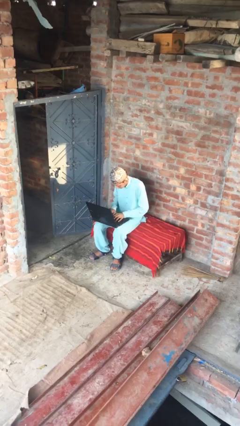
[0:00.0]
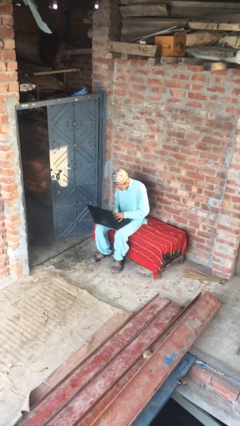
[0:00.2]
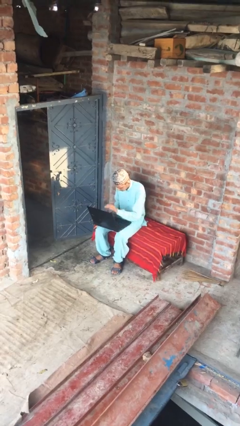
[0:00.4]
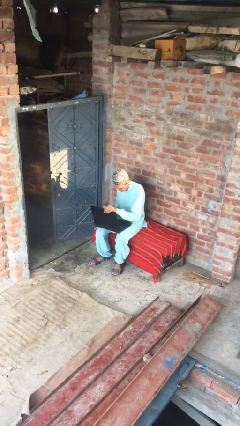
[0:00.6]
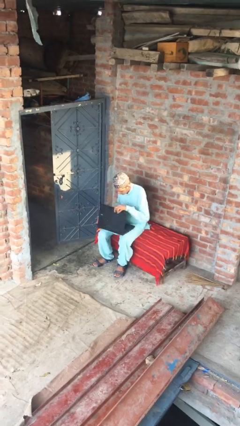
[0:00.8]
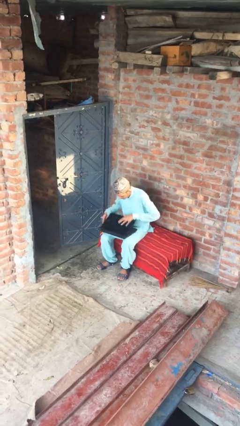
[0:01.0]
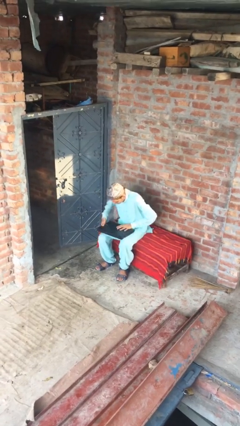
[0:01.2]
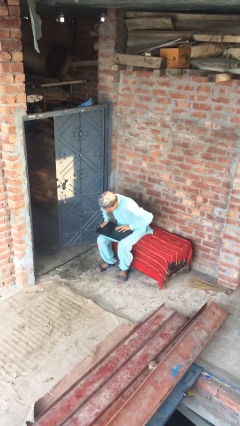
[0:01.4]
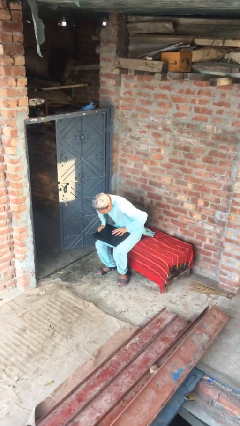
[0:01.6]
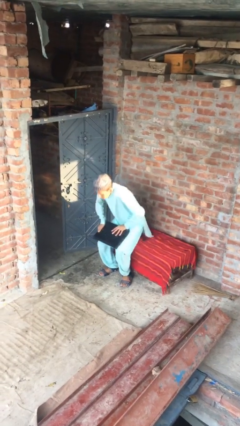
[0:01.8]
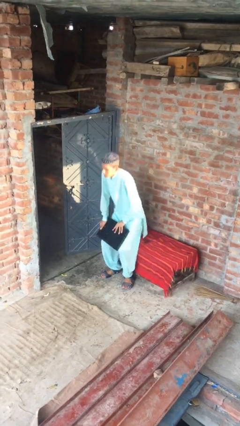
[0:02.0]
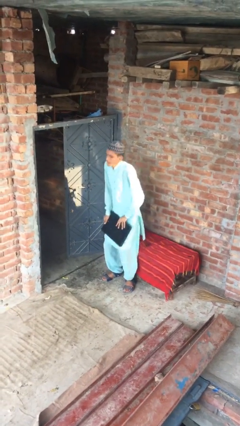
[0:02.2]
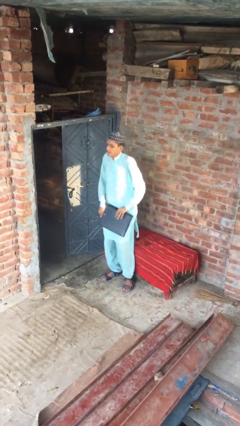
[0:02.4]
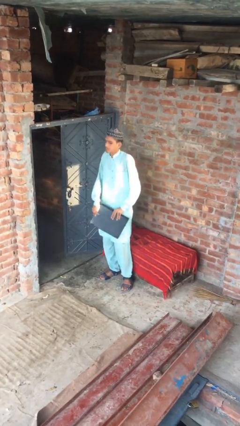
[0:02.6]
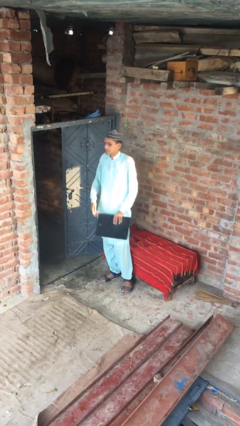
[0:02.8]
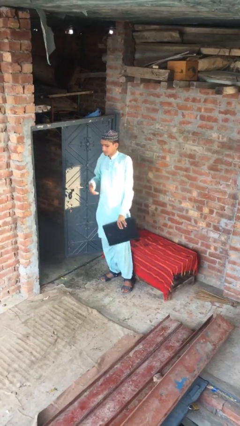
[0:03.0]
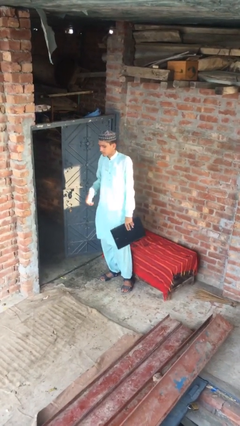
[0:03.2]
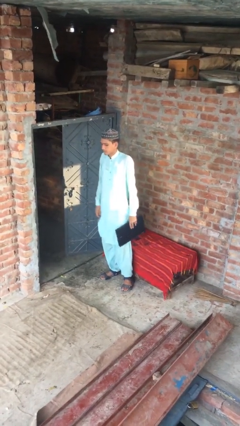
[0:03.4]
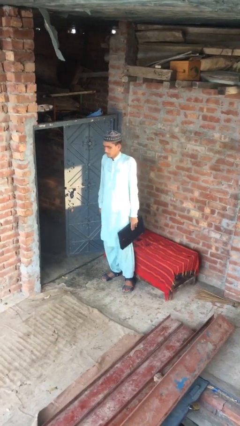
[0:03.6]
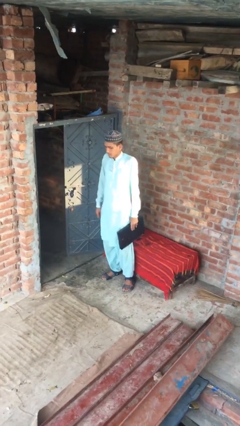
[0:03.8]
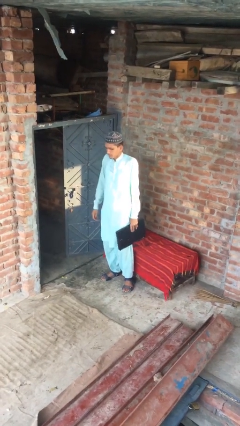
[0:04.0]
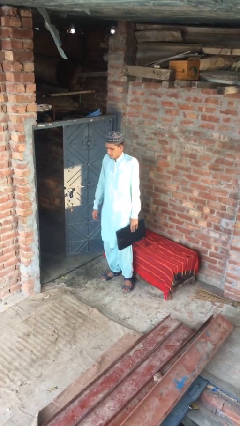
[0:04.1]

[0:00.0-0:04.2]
person stands up

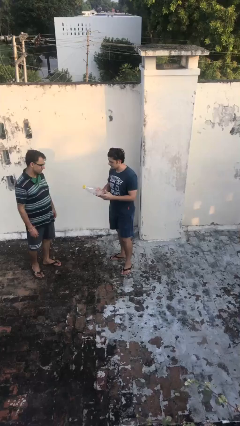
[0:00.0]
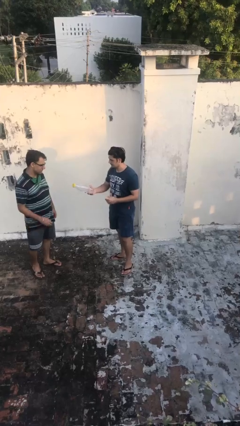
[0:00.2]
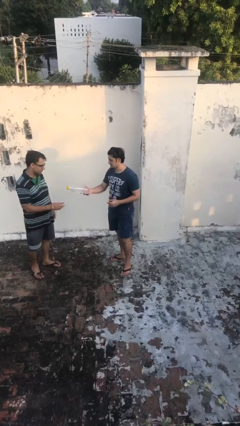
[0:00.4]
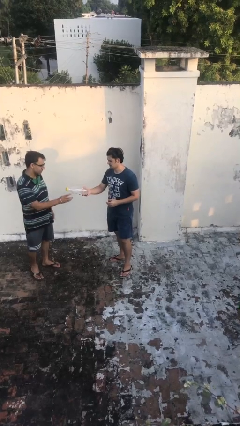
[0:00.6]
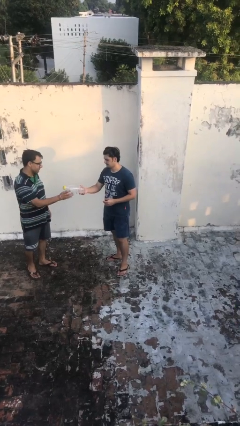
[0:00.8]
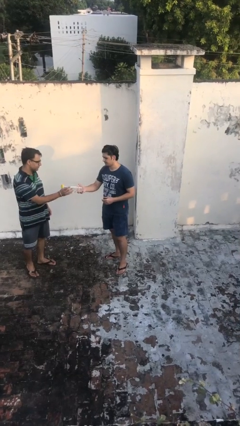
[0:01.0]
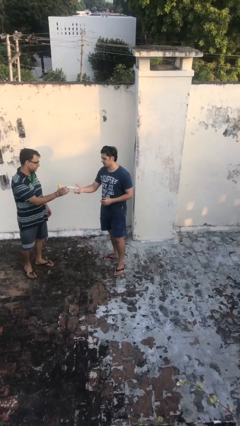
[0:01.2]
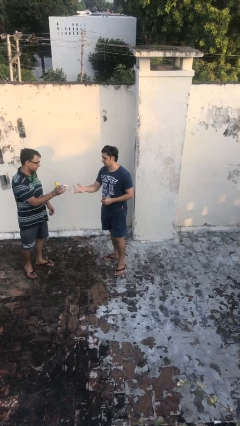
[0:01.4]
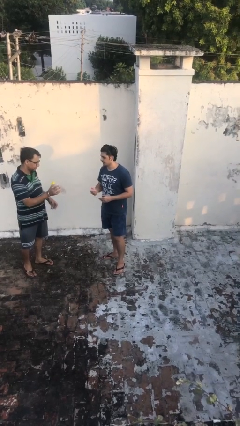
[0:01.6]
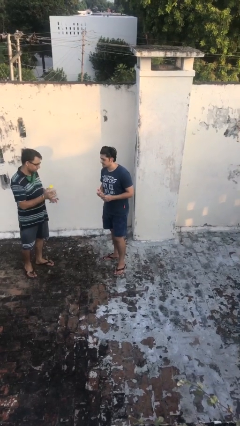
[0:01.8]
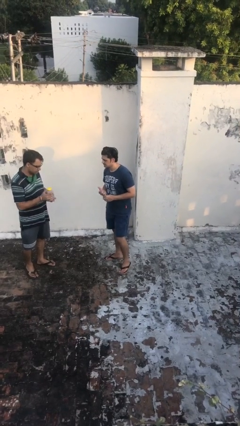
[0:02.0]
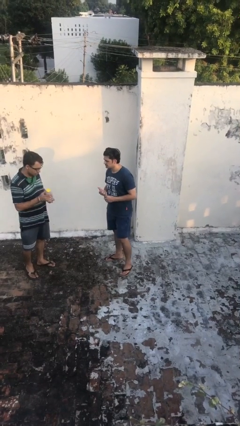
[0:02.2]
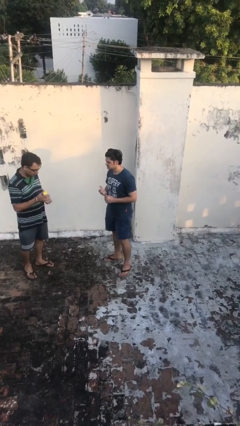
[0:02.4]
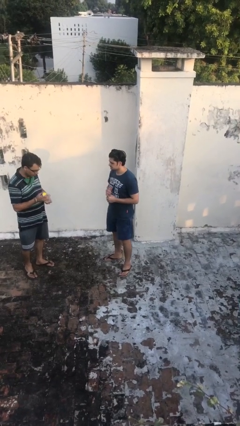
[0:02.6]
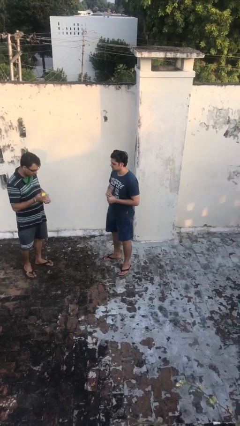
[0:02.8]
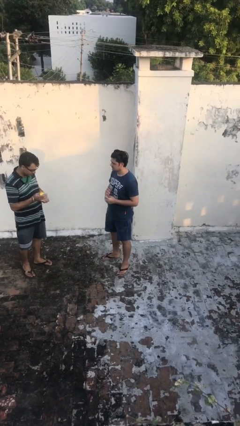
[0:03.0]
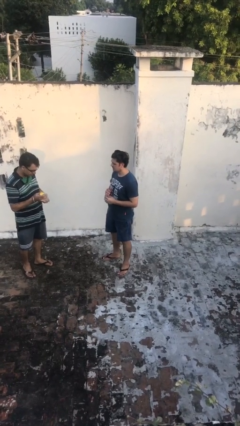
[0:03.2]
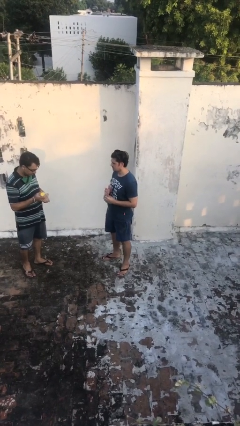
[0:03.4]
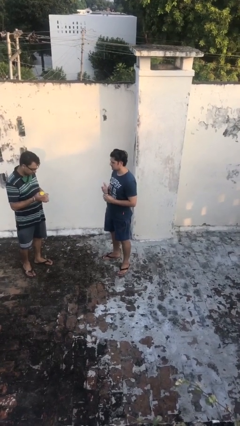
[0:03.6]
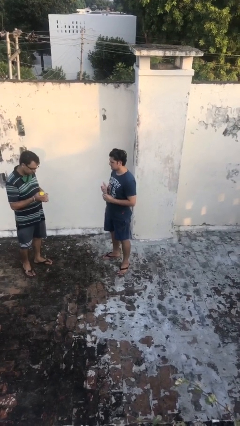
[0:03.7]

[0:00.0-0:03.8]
person transfers object to person

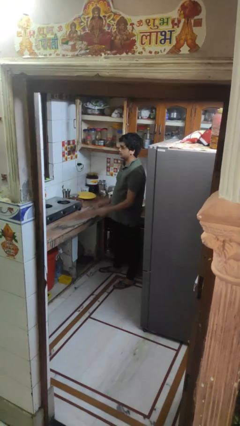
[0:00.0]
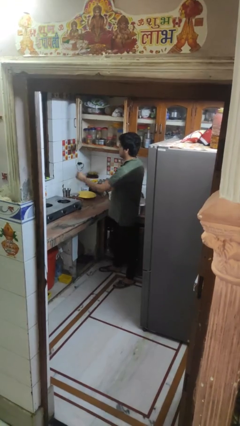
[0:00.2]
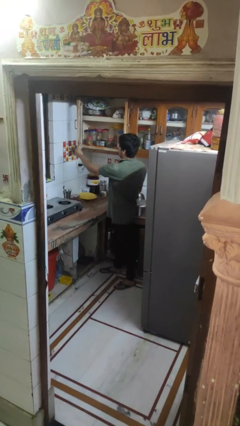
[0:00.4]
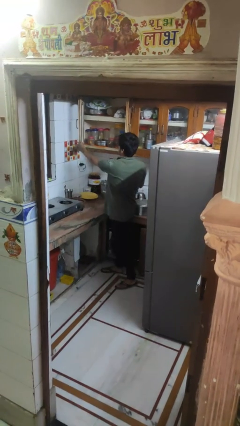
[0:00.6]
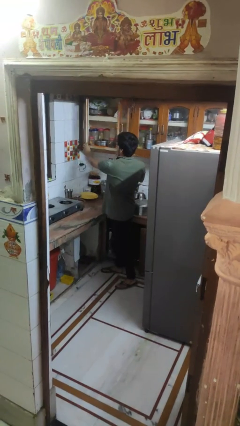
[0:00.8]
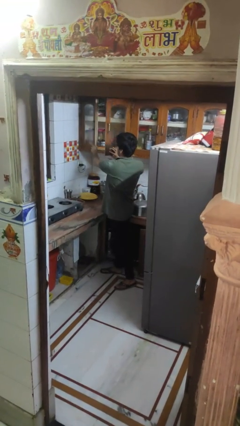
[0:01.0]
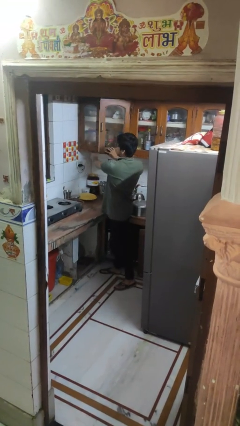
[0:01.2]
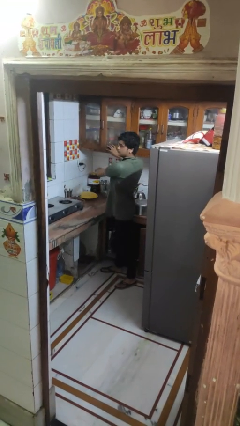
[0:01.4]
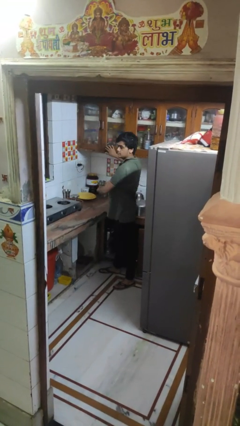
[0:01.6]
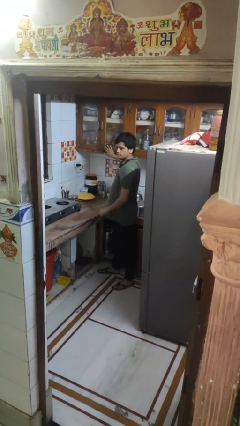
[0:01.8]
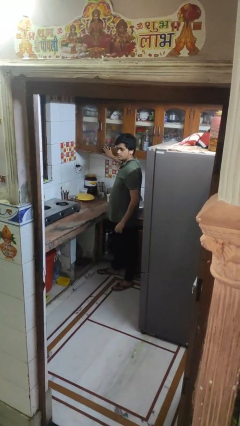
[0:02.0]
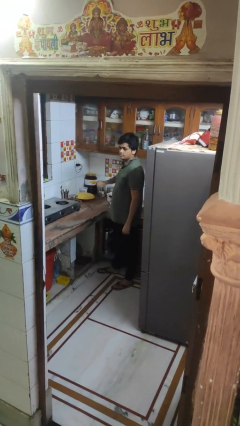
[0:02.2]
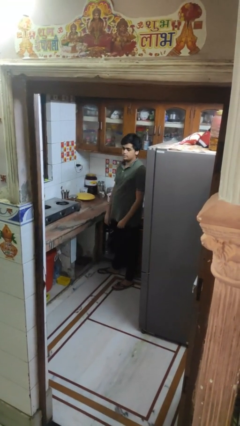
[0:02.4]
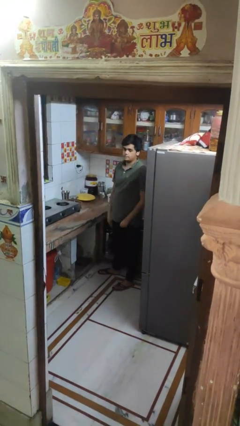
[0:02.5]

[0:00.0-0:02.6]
person closes cabinet

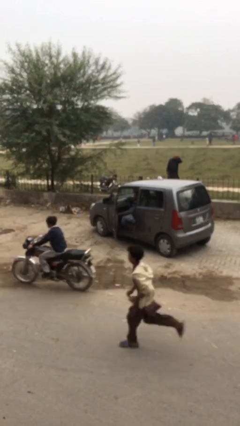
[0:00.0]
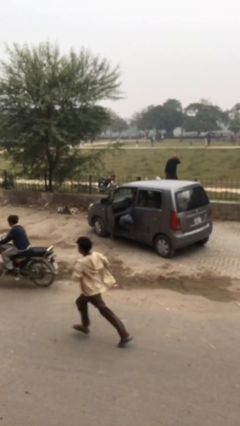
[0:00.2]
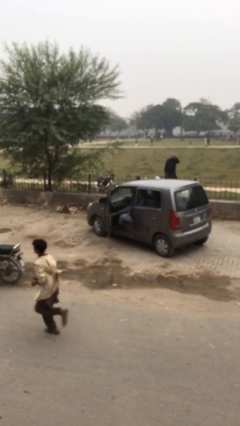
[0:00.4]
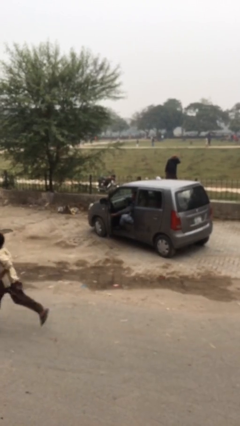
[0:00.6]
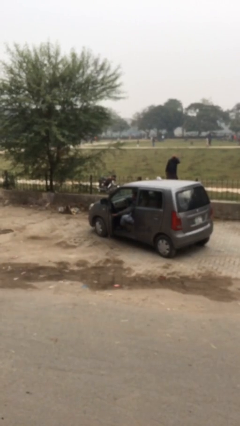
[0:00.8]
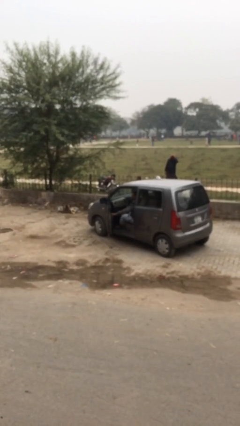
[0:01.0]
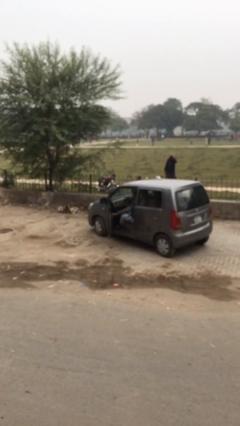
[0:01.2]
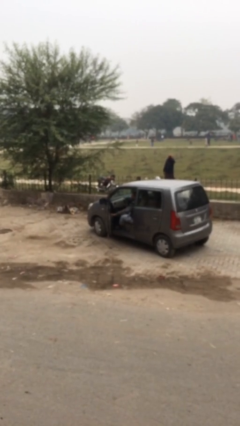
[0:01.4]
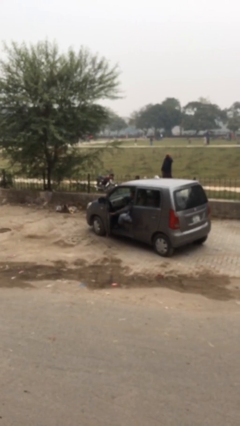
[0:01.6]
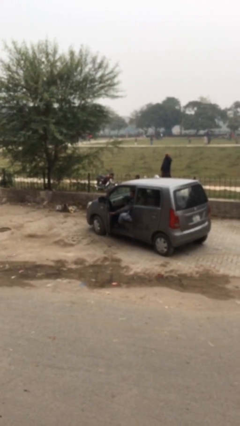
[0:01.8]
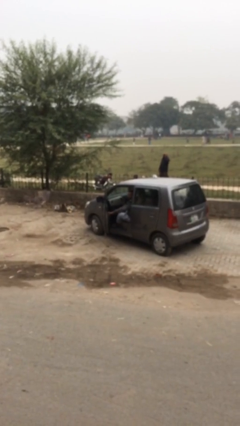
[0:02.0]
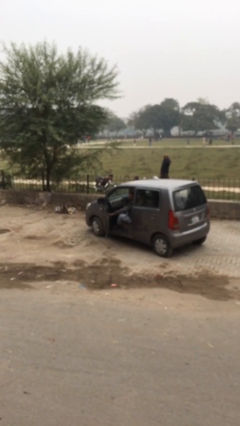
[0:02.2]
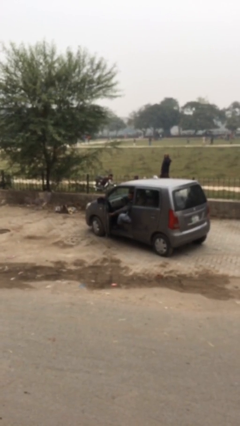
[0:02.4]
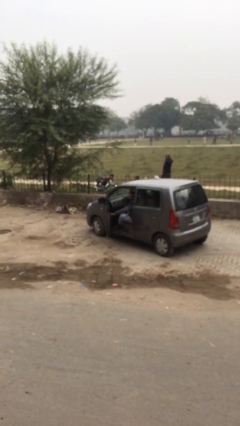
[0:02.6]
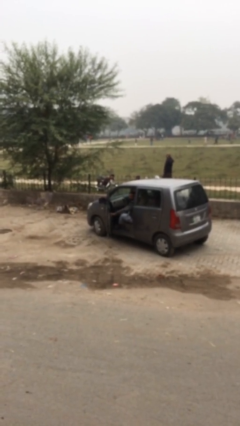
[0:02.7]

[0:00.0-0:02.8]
person opens car door

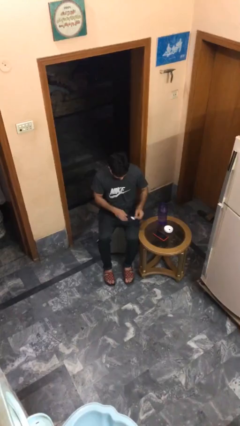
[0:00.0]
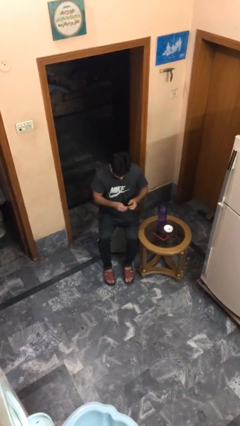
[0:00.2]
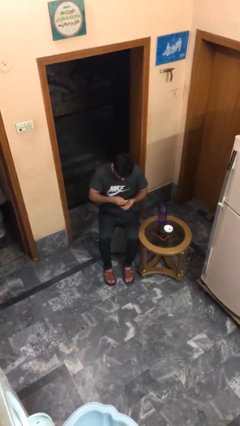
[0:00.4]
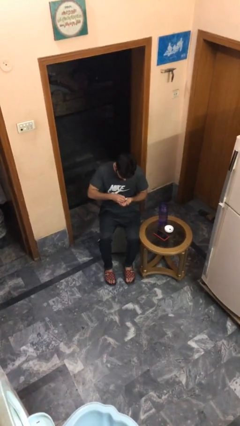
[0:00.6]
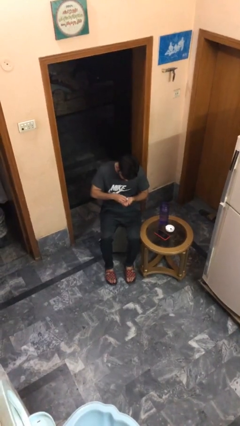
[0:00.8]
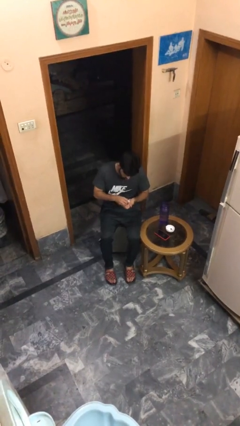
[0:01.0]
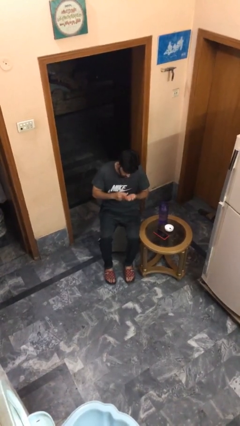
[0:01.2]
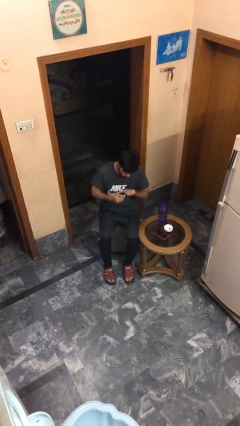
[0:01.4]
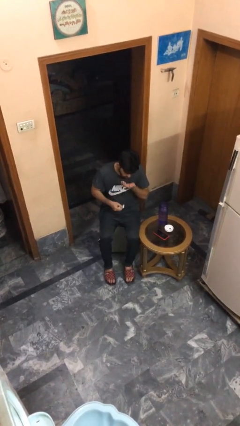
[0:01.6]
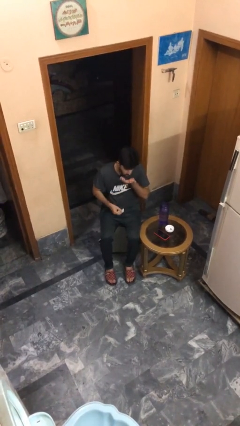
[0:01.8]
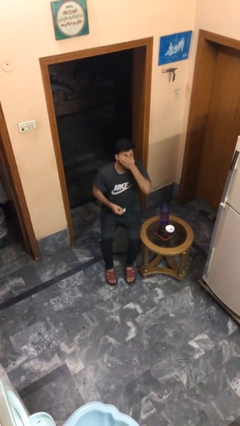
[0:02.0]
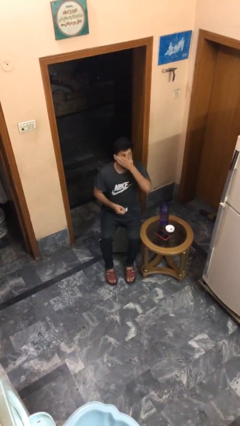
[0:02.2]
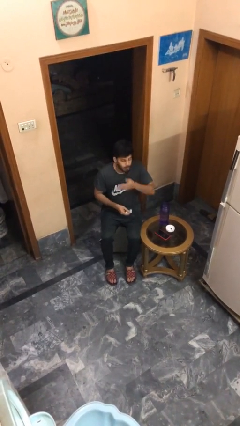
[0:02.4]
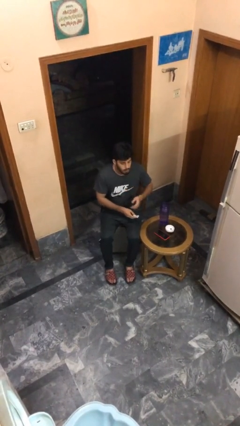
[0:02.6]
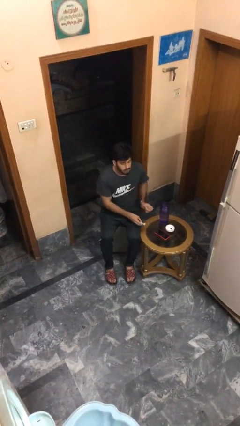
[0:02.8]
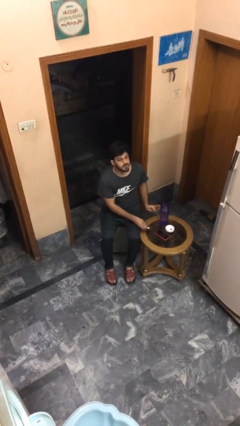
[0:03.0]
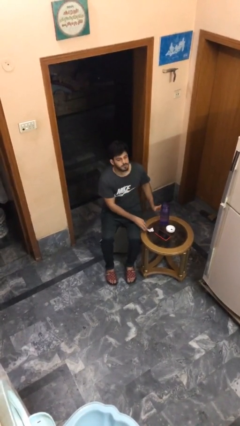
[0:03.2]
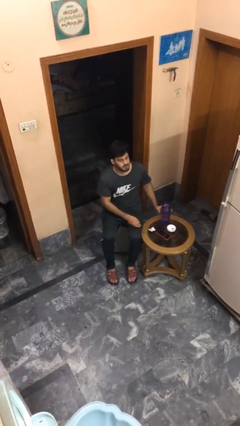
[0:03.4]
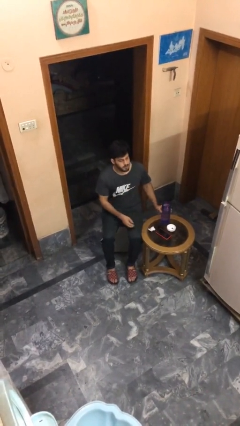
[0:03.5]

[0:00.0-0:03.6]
person takes medicine pills

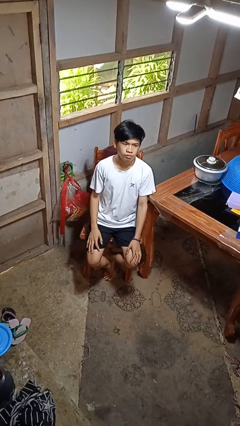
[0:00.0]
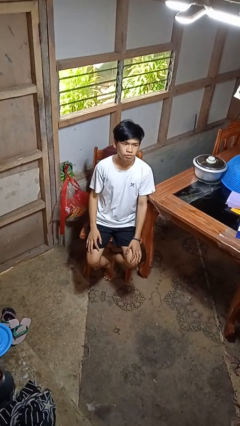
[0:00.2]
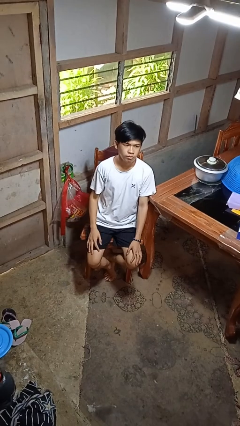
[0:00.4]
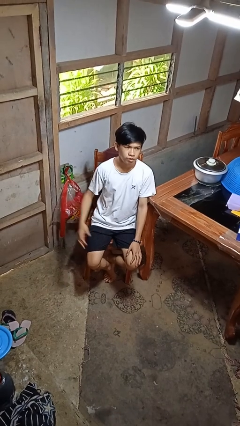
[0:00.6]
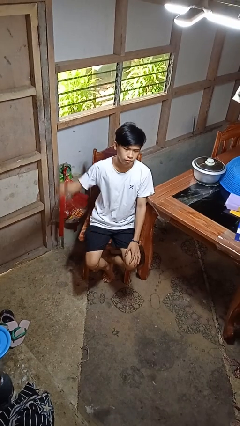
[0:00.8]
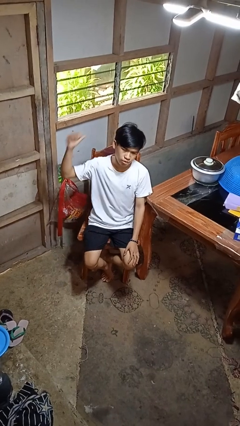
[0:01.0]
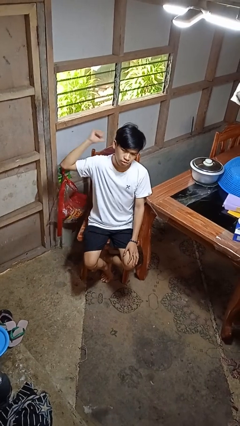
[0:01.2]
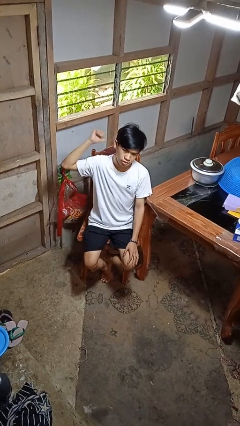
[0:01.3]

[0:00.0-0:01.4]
person gestures behind me
